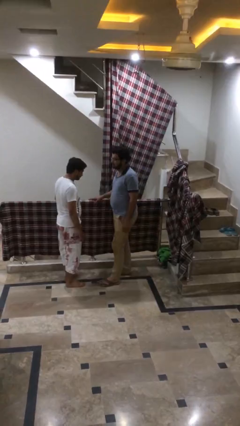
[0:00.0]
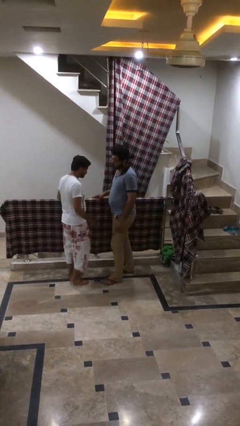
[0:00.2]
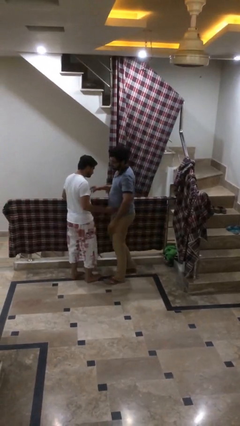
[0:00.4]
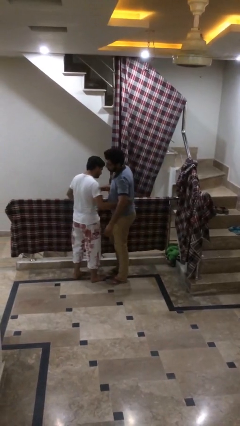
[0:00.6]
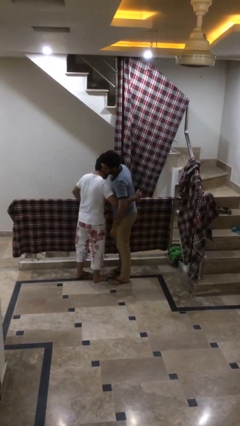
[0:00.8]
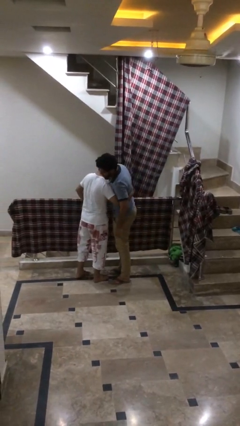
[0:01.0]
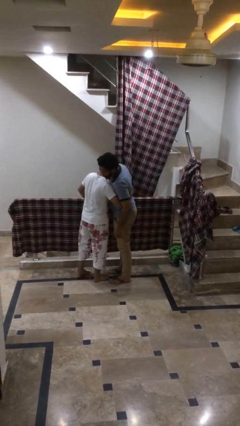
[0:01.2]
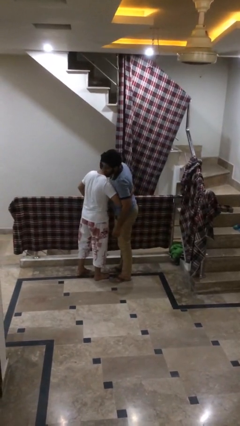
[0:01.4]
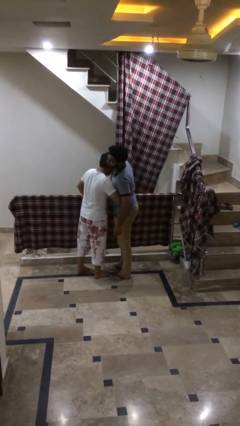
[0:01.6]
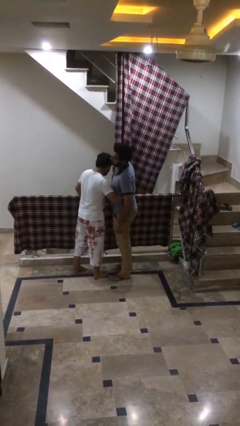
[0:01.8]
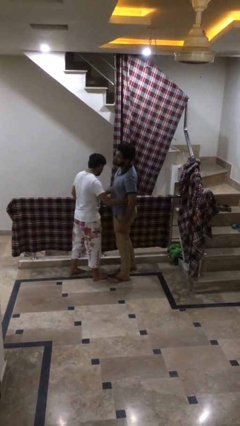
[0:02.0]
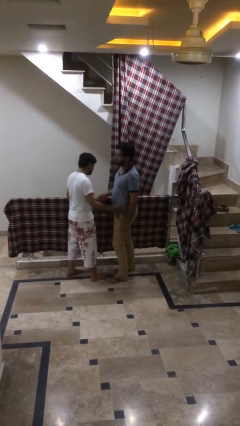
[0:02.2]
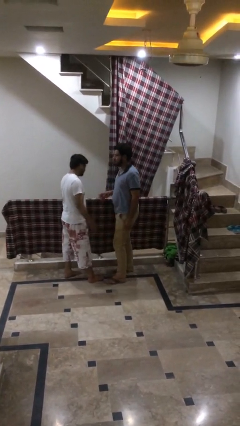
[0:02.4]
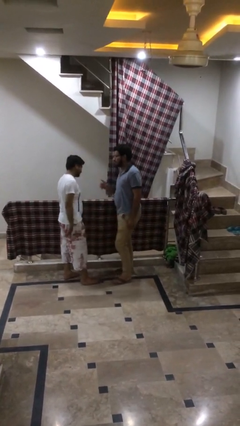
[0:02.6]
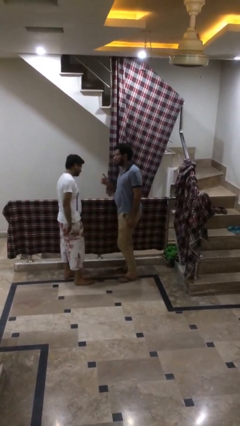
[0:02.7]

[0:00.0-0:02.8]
person embraces person

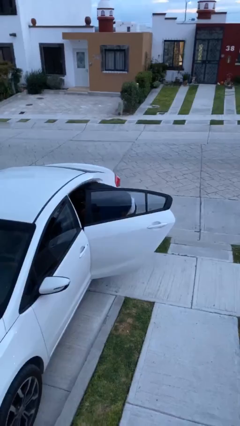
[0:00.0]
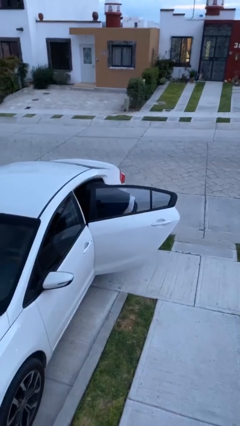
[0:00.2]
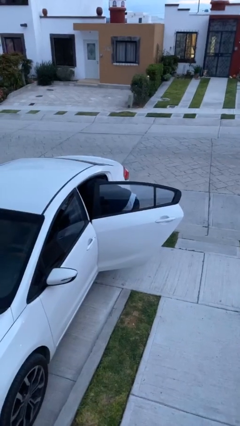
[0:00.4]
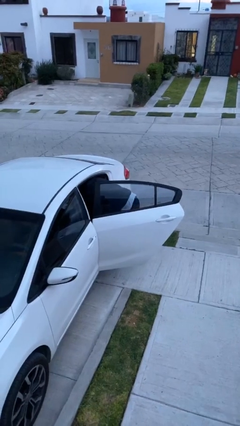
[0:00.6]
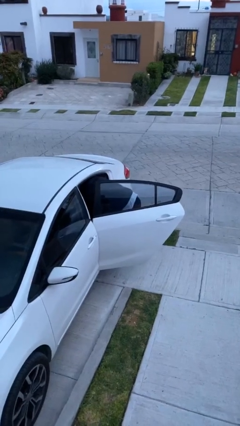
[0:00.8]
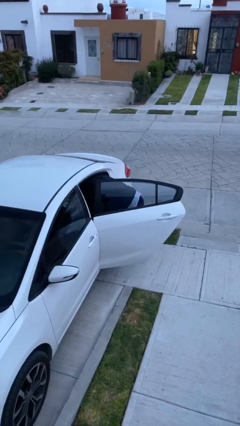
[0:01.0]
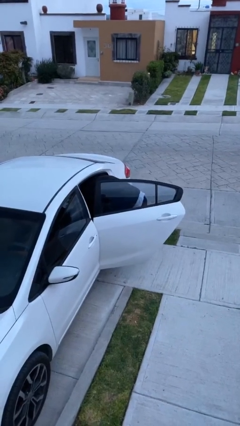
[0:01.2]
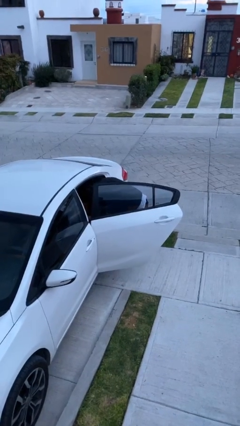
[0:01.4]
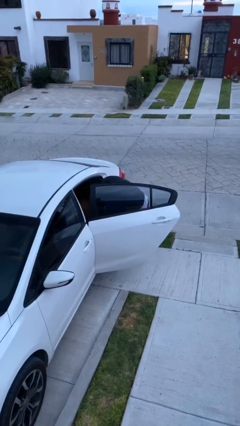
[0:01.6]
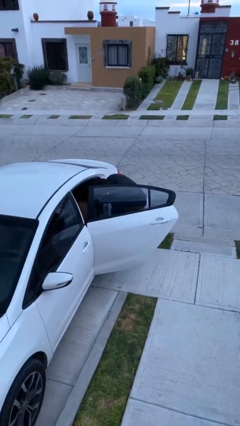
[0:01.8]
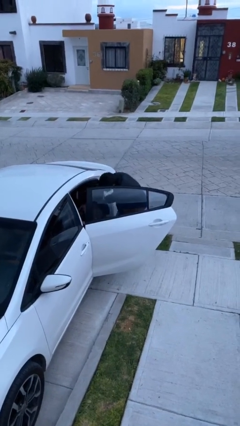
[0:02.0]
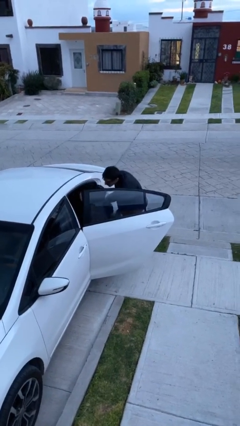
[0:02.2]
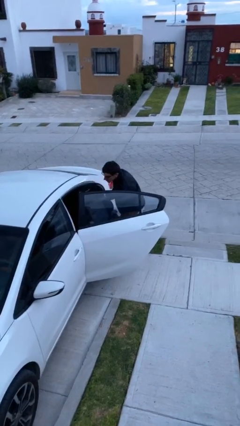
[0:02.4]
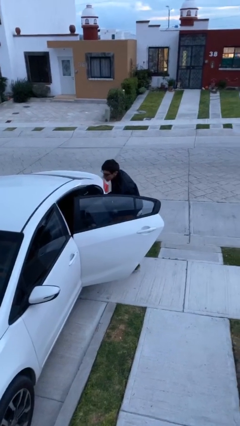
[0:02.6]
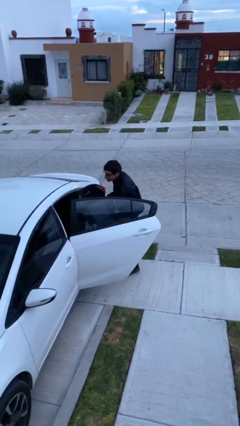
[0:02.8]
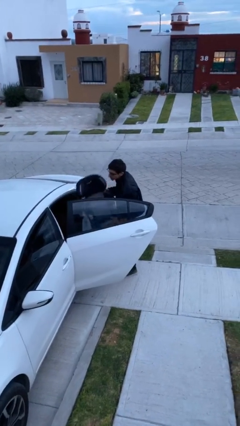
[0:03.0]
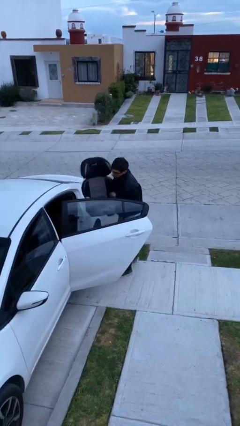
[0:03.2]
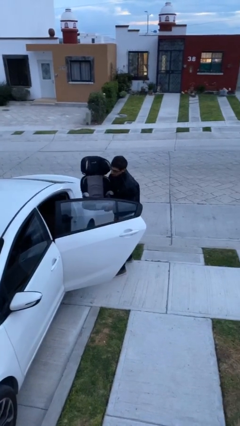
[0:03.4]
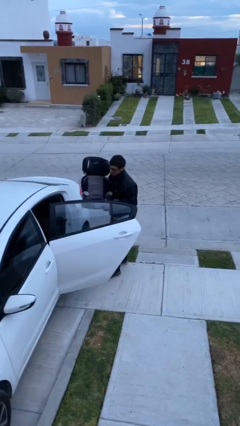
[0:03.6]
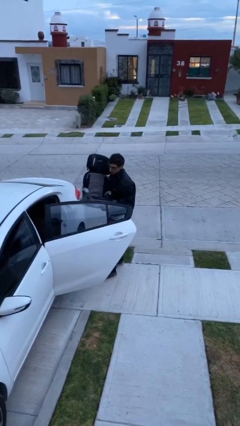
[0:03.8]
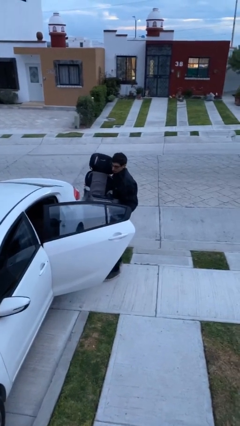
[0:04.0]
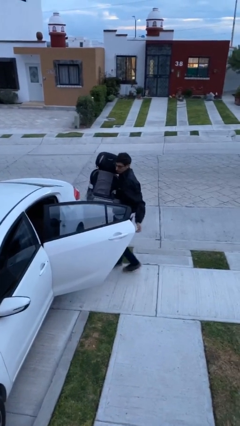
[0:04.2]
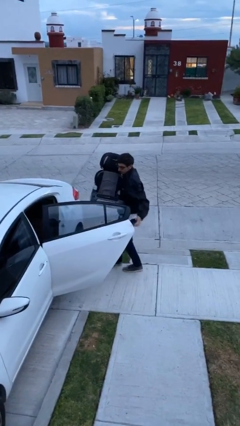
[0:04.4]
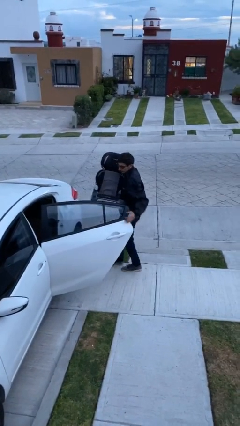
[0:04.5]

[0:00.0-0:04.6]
person unloads car

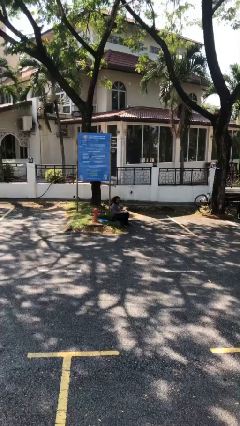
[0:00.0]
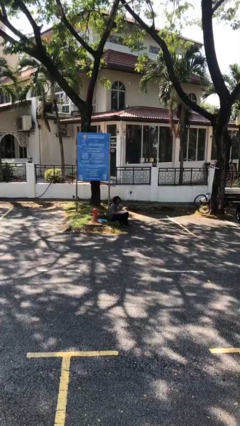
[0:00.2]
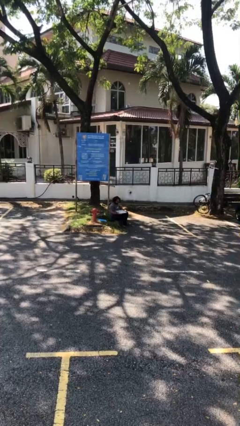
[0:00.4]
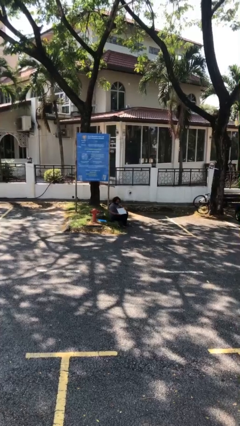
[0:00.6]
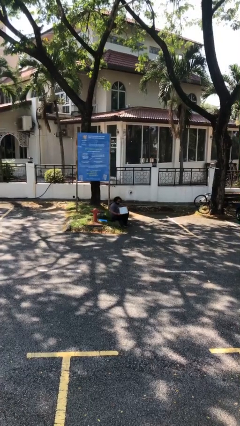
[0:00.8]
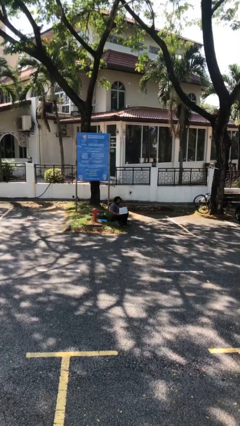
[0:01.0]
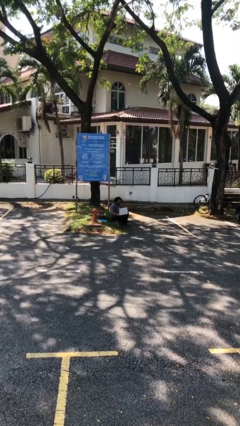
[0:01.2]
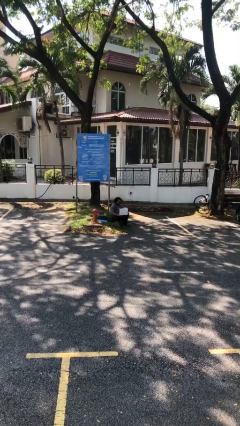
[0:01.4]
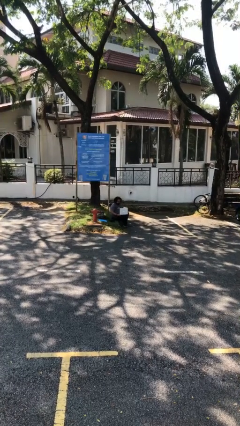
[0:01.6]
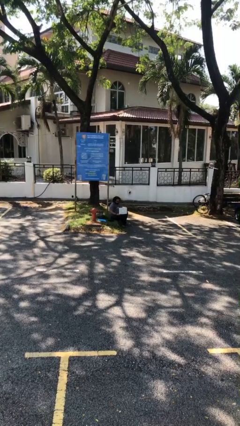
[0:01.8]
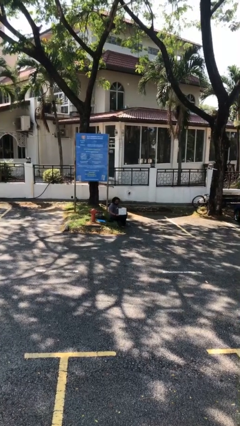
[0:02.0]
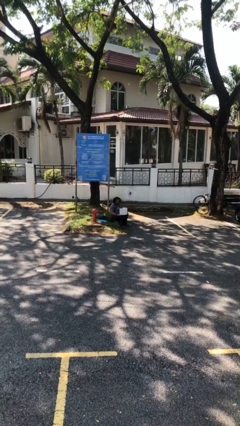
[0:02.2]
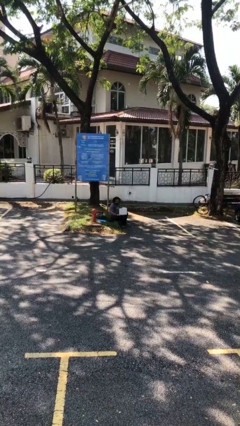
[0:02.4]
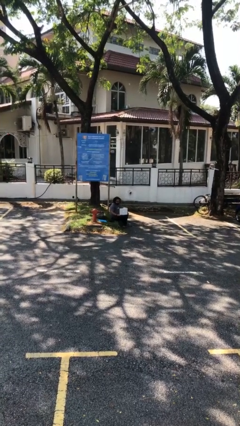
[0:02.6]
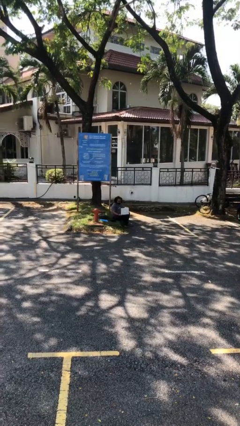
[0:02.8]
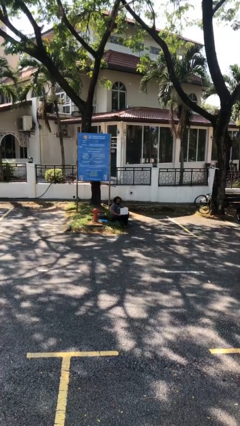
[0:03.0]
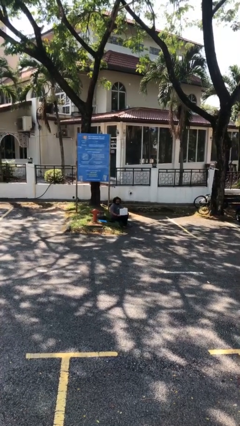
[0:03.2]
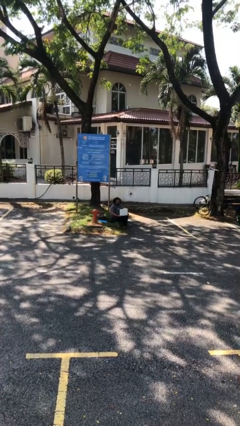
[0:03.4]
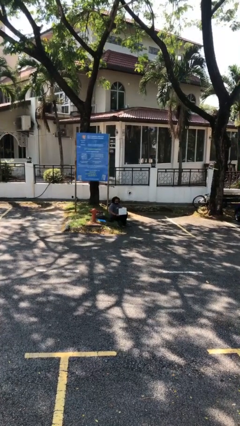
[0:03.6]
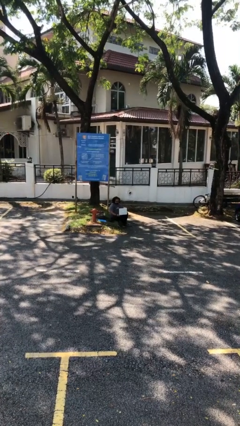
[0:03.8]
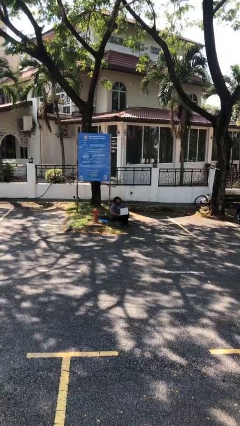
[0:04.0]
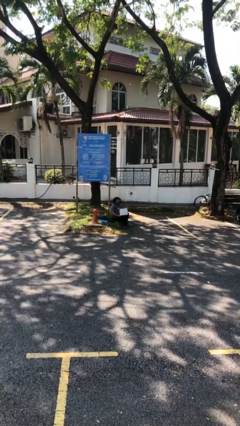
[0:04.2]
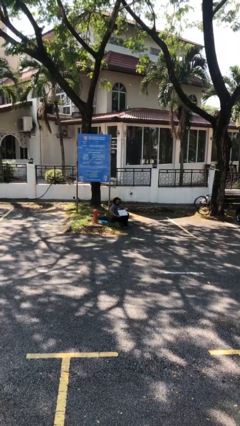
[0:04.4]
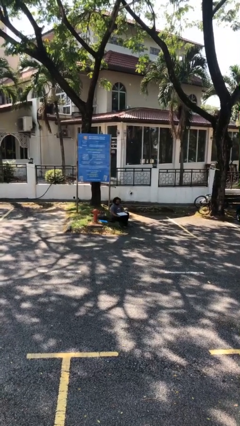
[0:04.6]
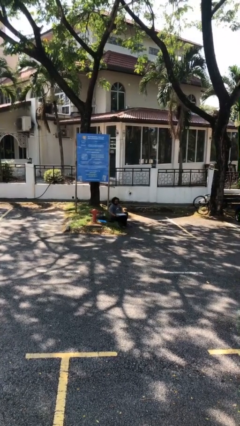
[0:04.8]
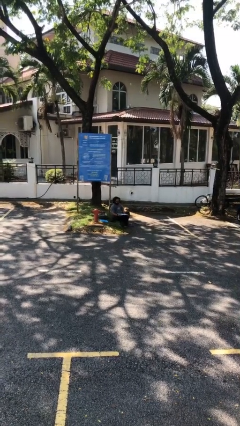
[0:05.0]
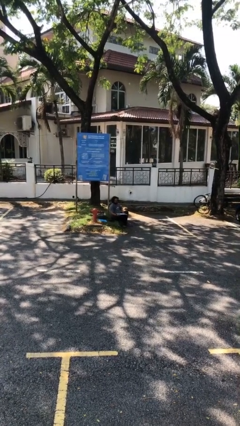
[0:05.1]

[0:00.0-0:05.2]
person interacts with laptop

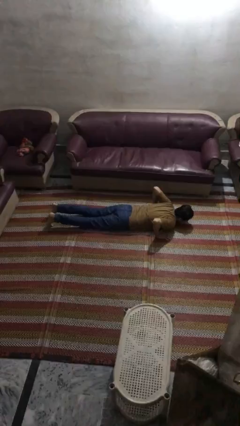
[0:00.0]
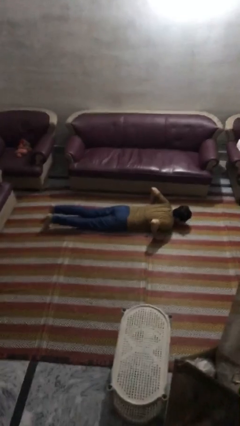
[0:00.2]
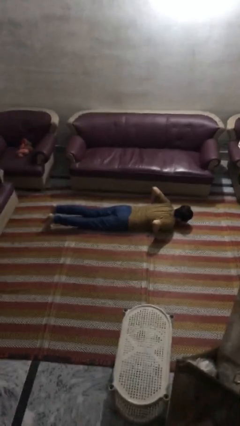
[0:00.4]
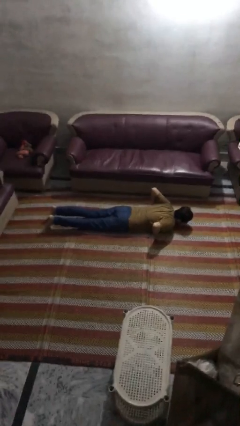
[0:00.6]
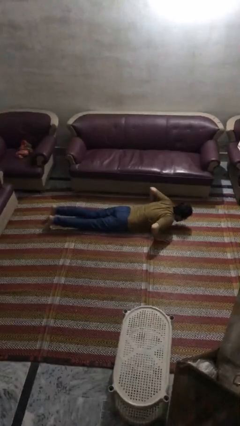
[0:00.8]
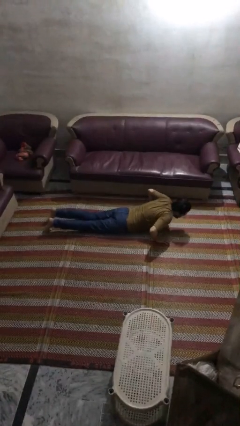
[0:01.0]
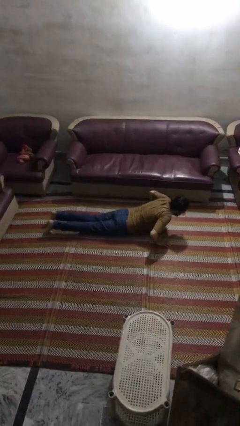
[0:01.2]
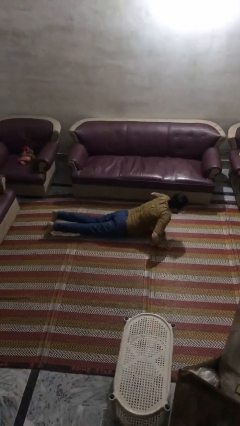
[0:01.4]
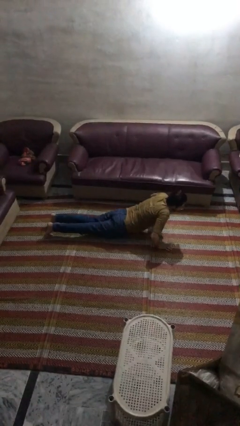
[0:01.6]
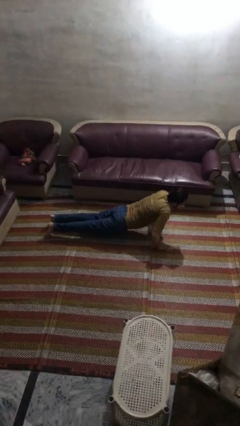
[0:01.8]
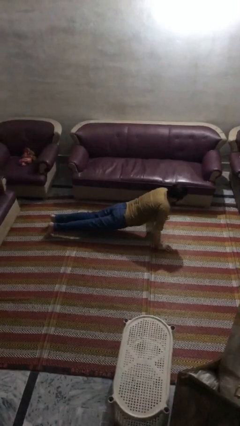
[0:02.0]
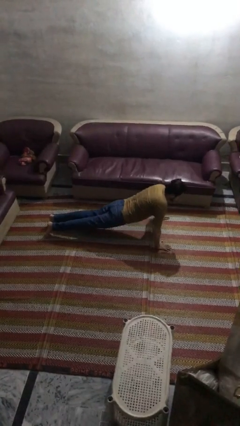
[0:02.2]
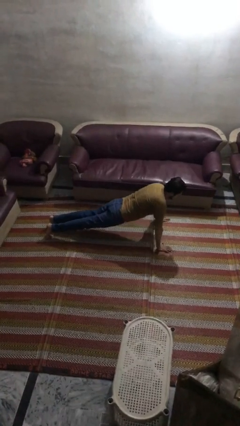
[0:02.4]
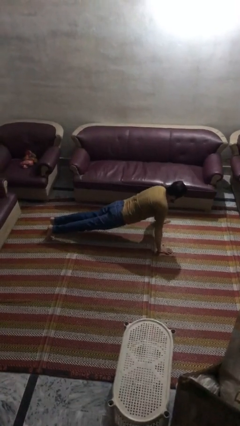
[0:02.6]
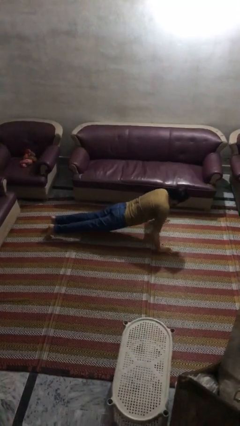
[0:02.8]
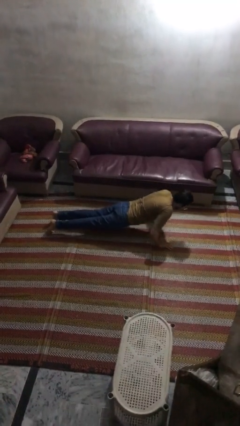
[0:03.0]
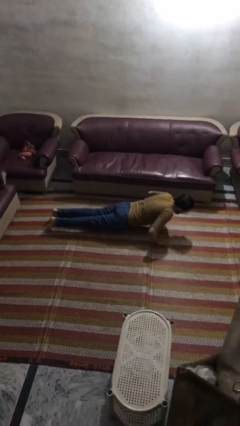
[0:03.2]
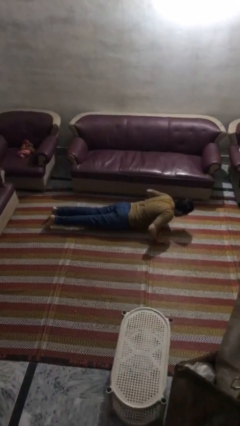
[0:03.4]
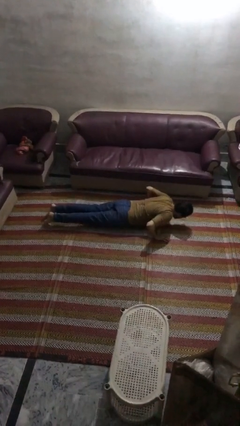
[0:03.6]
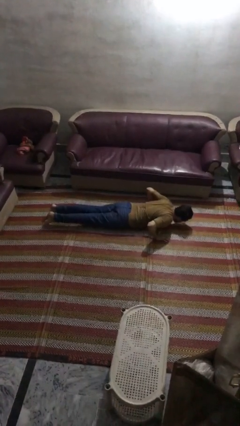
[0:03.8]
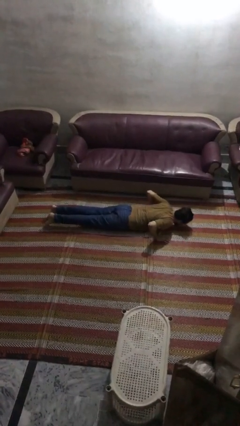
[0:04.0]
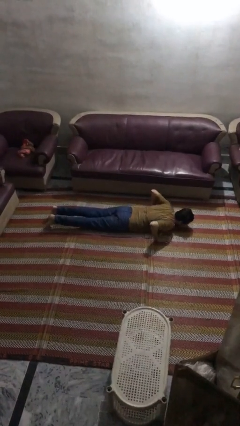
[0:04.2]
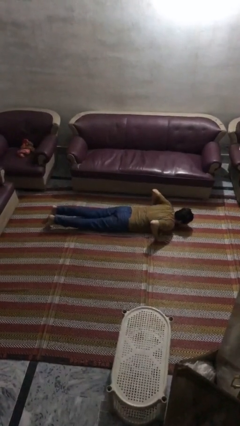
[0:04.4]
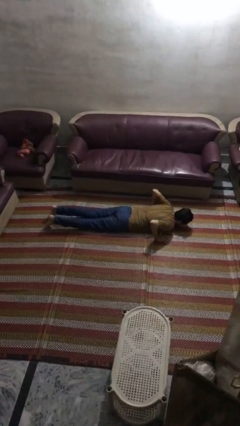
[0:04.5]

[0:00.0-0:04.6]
person exercises with pushup

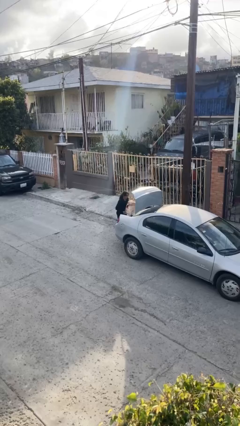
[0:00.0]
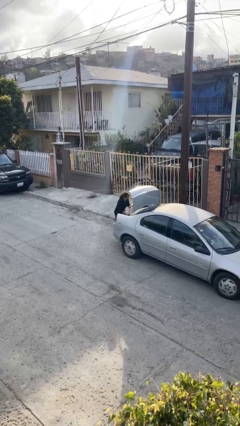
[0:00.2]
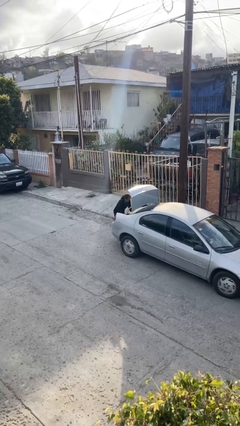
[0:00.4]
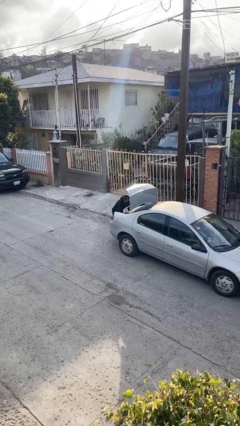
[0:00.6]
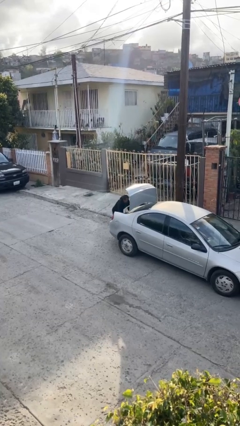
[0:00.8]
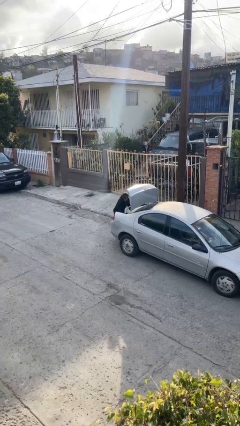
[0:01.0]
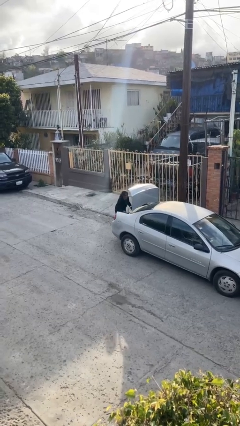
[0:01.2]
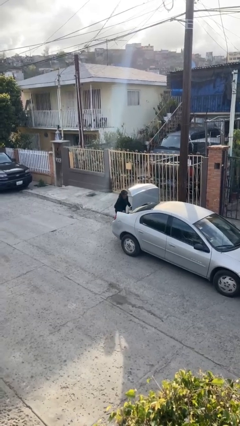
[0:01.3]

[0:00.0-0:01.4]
person loads car
